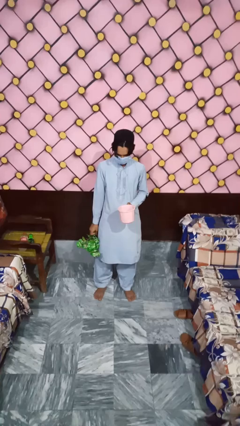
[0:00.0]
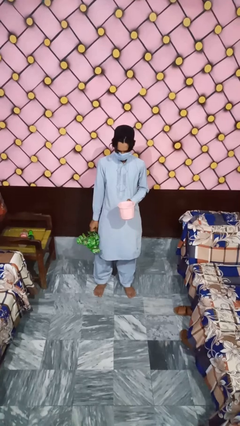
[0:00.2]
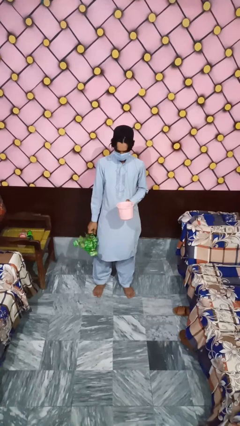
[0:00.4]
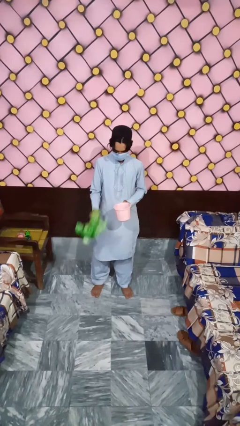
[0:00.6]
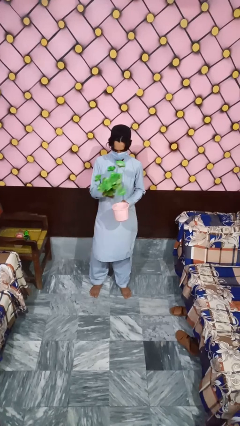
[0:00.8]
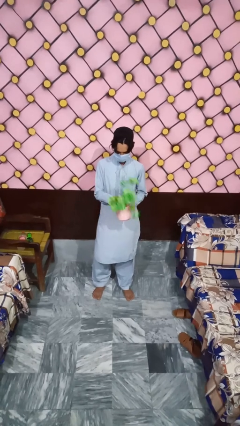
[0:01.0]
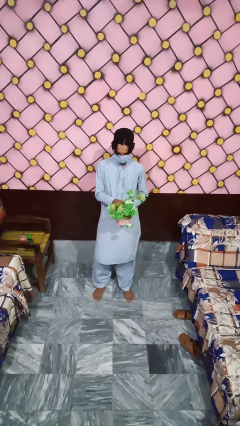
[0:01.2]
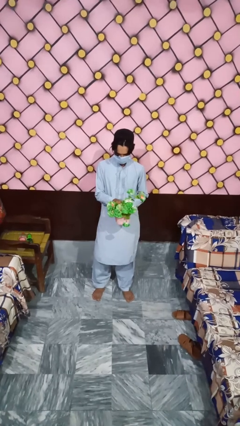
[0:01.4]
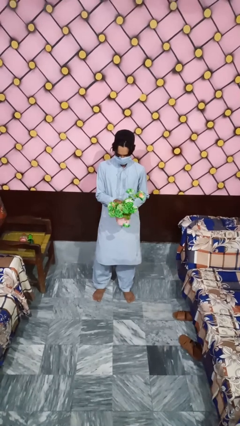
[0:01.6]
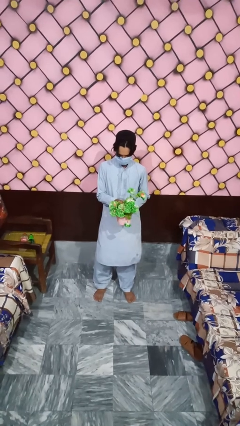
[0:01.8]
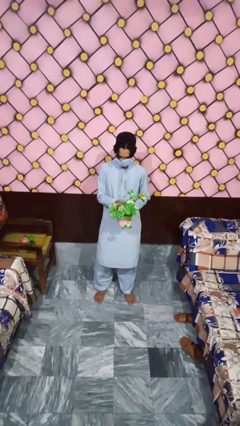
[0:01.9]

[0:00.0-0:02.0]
person arranges flowers in vase

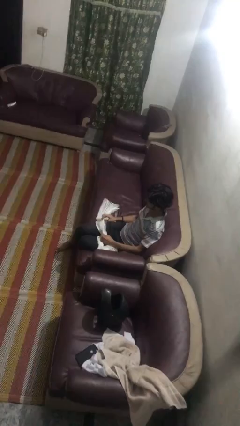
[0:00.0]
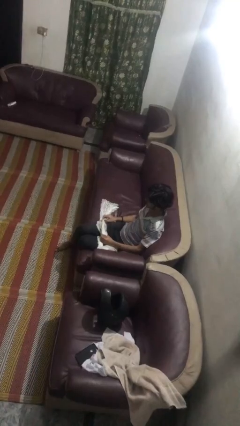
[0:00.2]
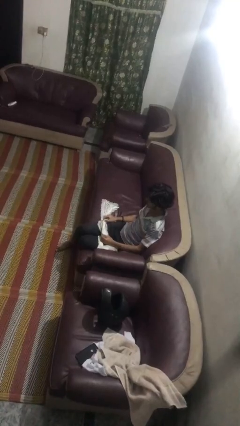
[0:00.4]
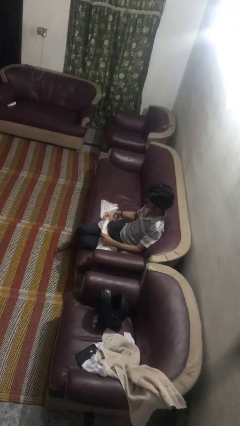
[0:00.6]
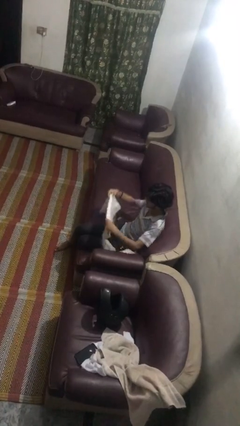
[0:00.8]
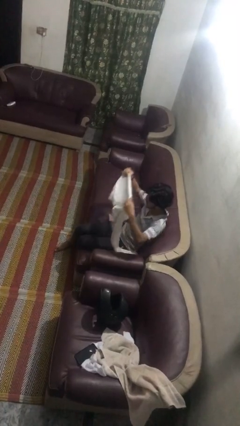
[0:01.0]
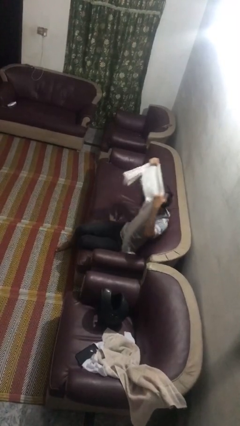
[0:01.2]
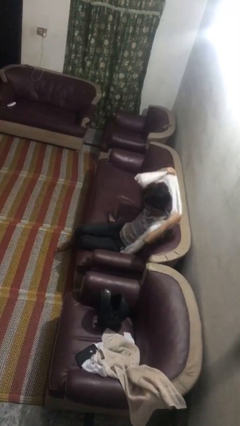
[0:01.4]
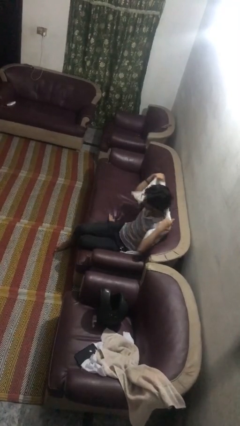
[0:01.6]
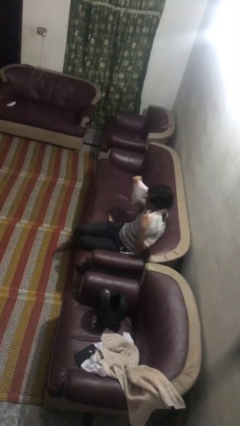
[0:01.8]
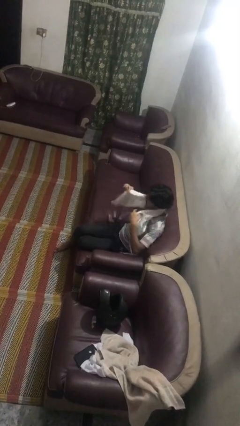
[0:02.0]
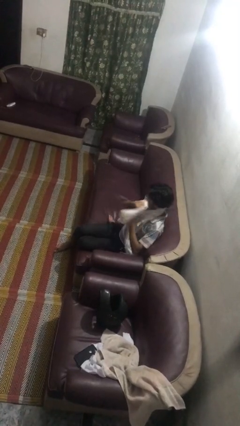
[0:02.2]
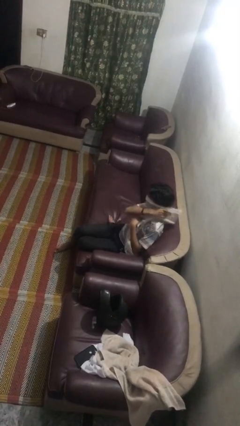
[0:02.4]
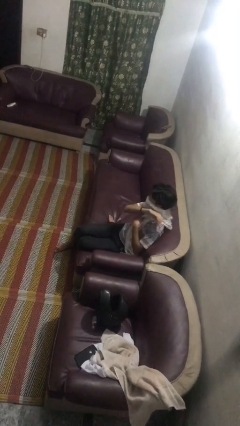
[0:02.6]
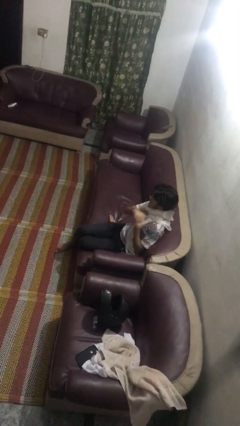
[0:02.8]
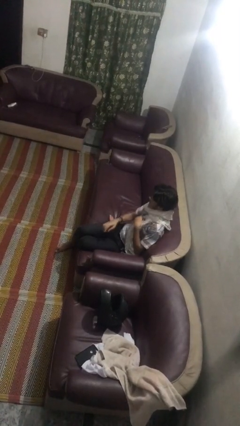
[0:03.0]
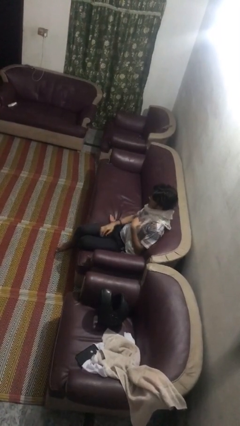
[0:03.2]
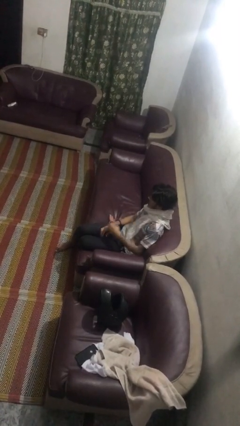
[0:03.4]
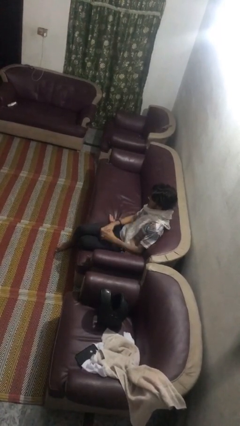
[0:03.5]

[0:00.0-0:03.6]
person puts on scarf

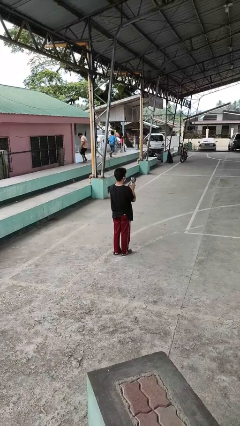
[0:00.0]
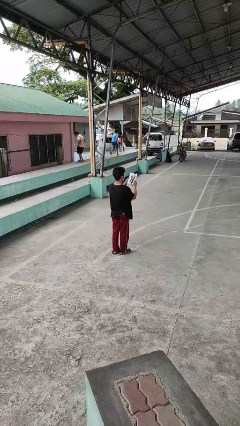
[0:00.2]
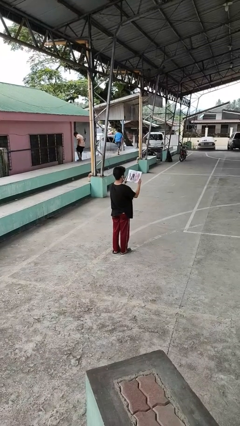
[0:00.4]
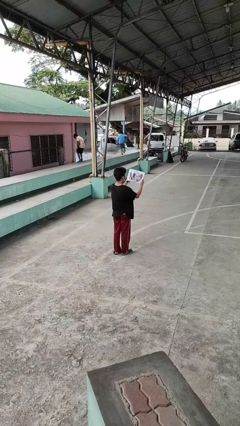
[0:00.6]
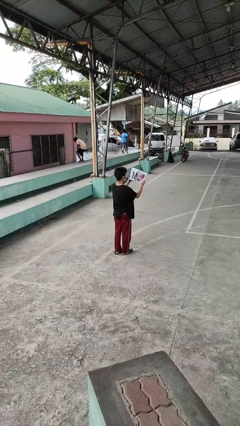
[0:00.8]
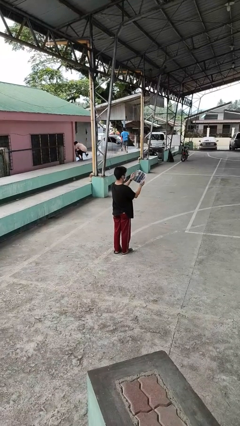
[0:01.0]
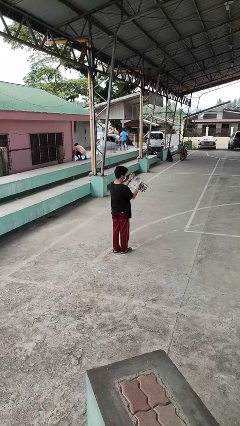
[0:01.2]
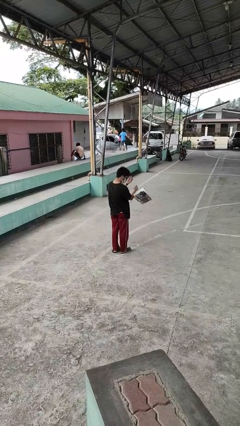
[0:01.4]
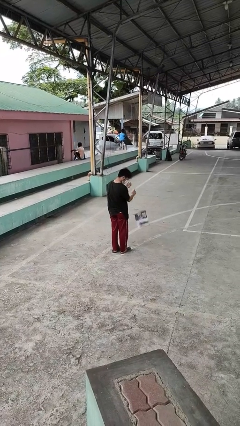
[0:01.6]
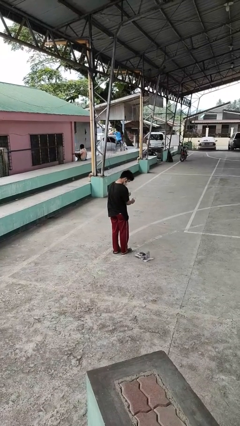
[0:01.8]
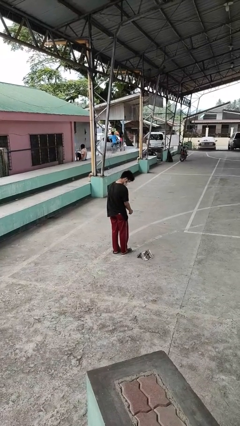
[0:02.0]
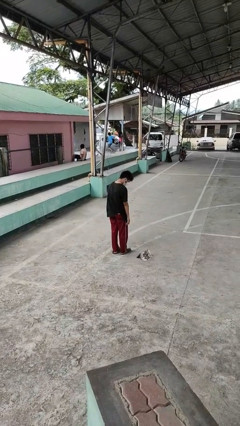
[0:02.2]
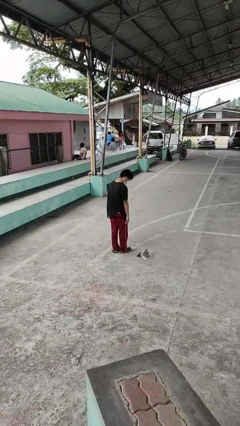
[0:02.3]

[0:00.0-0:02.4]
person drops object

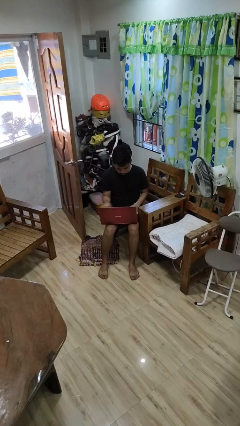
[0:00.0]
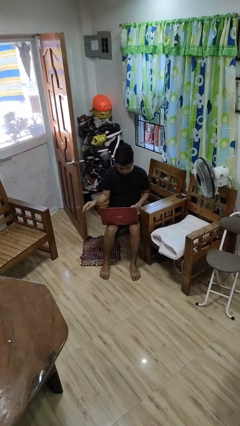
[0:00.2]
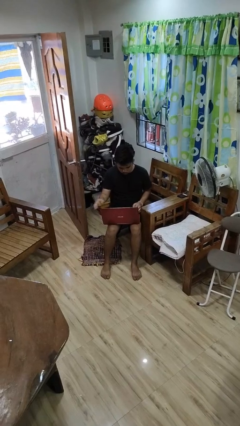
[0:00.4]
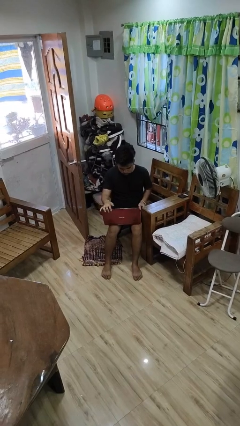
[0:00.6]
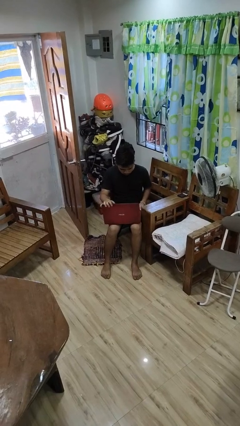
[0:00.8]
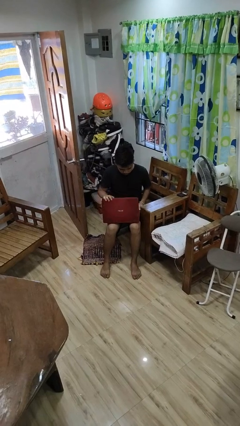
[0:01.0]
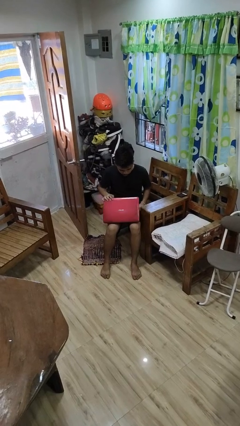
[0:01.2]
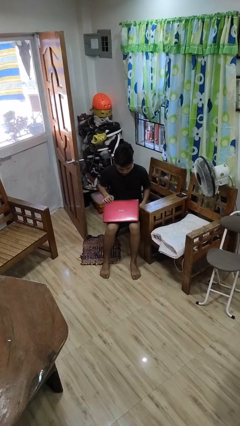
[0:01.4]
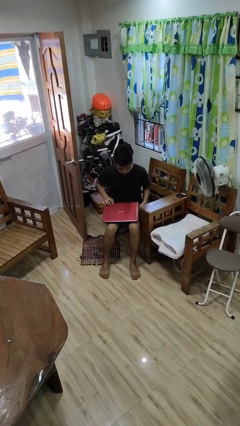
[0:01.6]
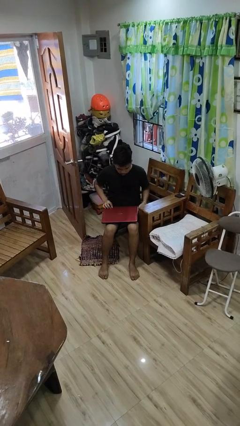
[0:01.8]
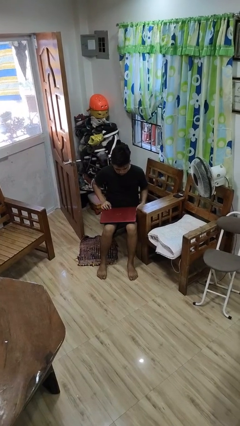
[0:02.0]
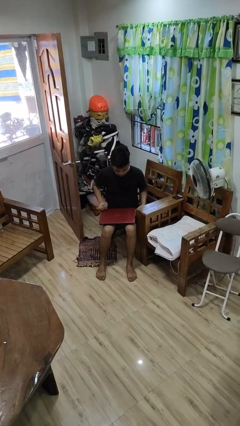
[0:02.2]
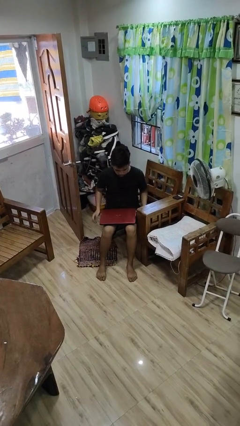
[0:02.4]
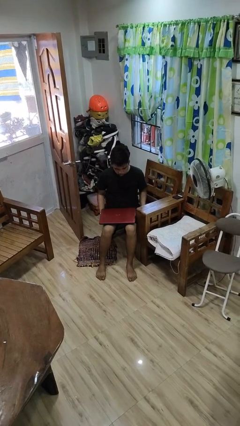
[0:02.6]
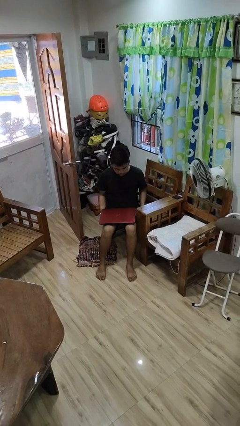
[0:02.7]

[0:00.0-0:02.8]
person closes laptop

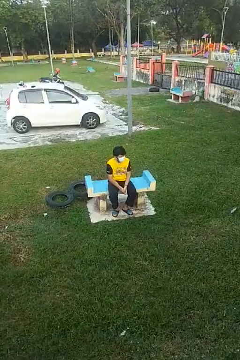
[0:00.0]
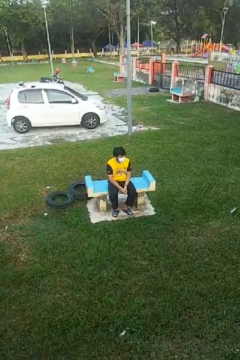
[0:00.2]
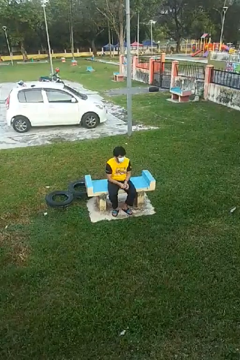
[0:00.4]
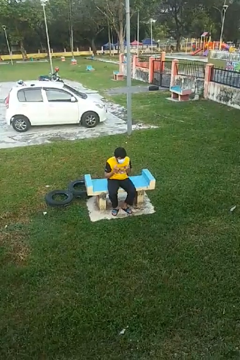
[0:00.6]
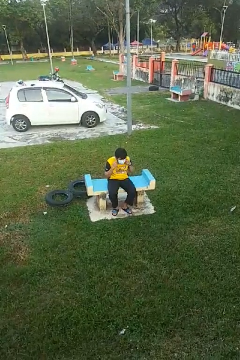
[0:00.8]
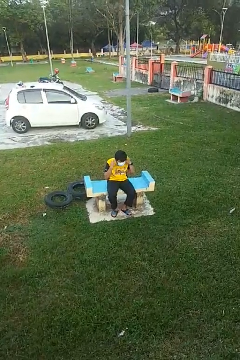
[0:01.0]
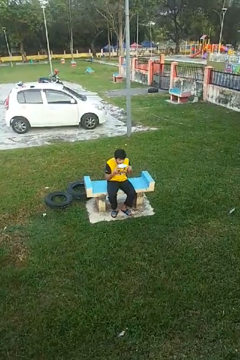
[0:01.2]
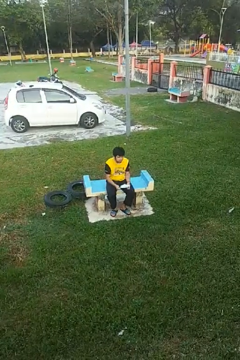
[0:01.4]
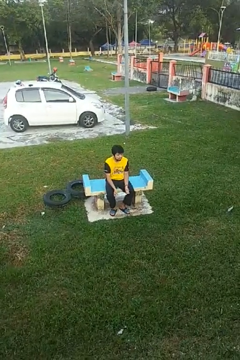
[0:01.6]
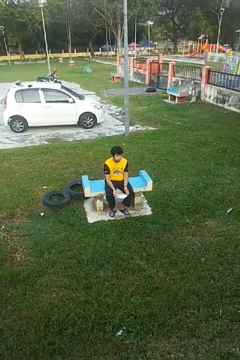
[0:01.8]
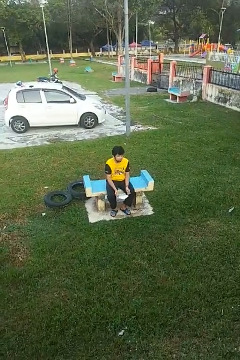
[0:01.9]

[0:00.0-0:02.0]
person takes off facemask

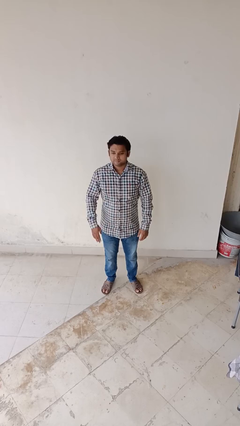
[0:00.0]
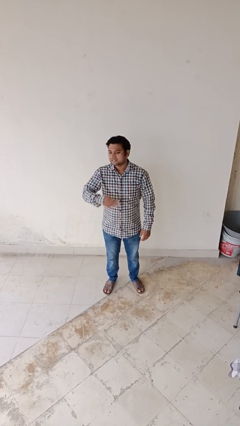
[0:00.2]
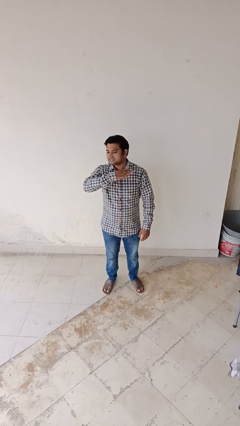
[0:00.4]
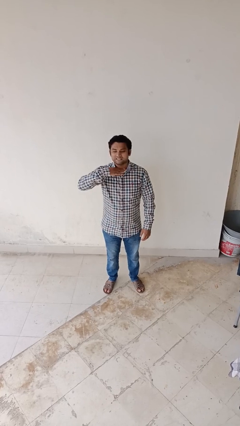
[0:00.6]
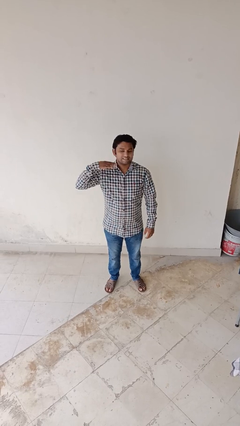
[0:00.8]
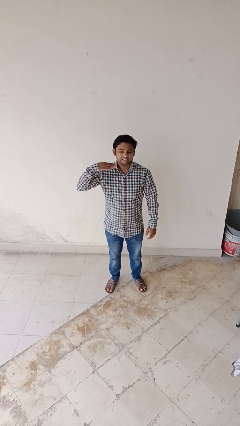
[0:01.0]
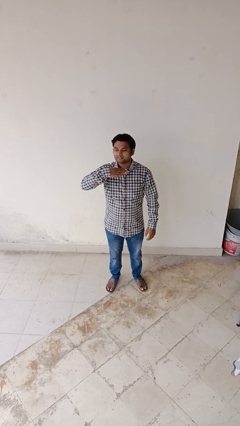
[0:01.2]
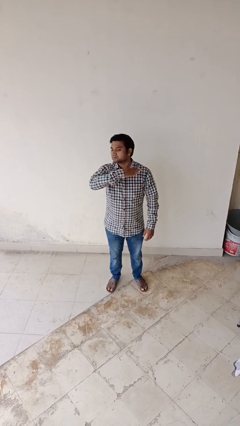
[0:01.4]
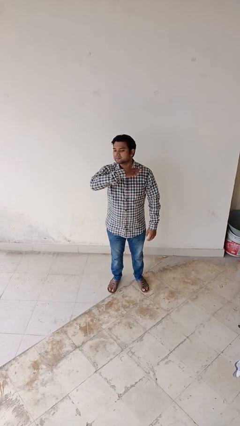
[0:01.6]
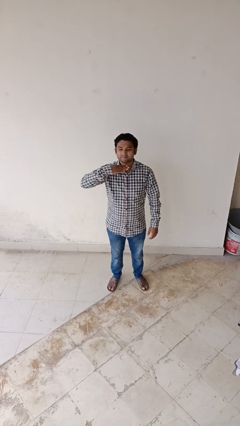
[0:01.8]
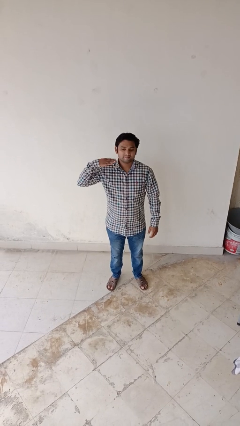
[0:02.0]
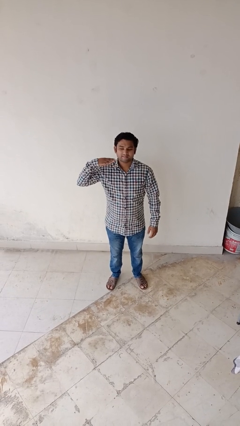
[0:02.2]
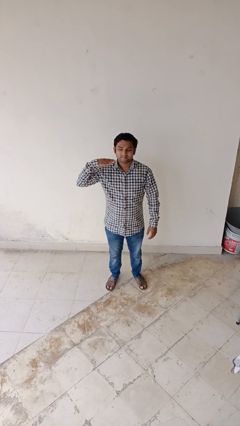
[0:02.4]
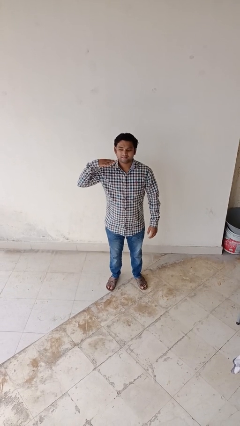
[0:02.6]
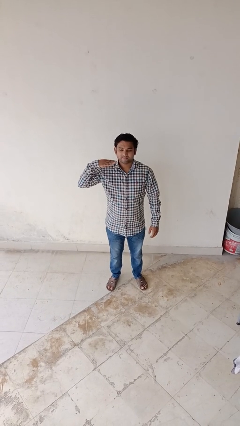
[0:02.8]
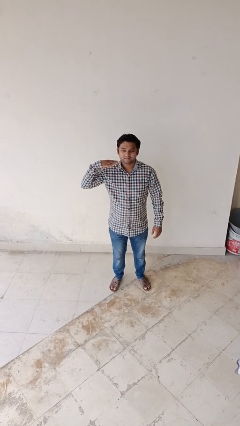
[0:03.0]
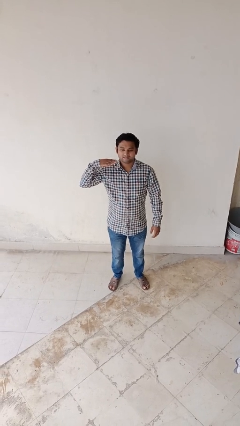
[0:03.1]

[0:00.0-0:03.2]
person gestures cut

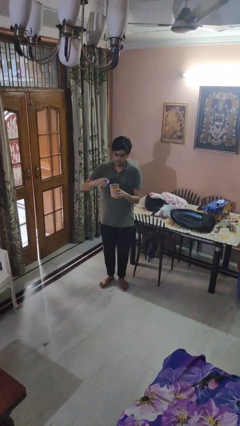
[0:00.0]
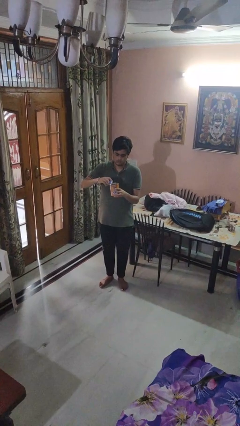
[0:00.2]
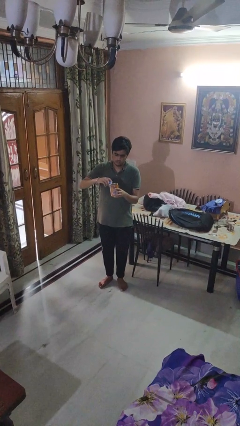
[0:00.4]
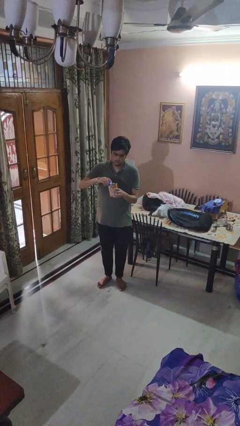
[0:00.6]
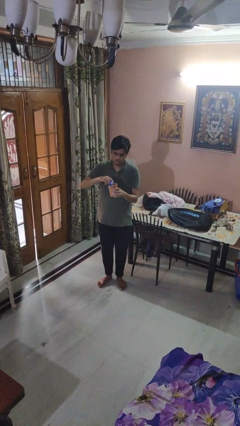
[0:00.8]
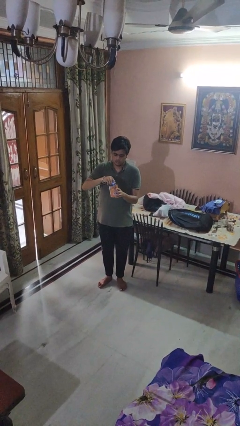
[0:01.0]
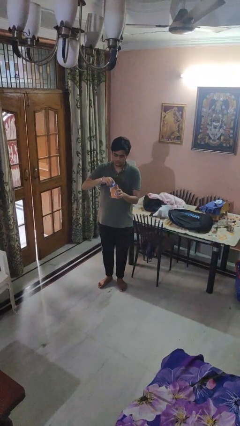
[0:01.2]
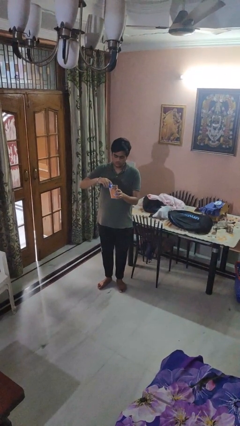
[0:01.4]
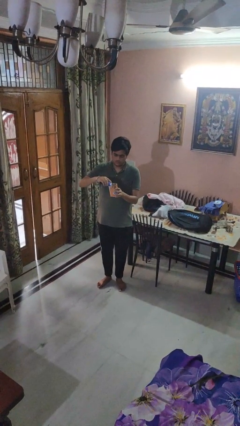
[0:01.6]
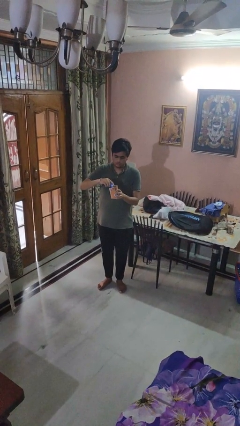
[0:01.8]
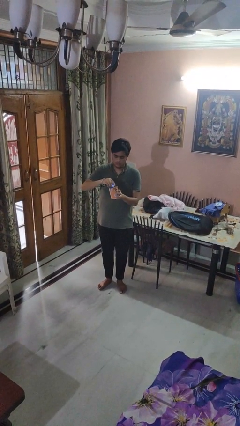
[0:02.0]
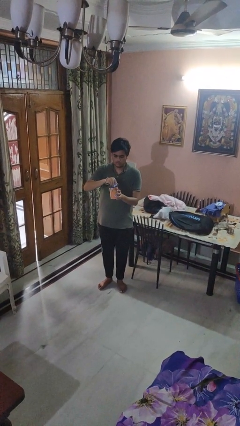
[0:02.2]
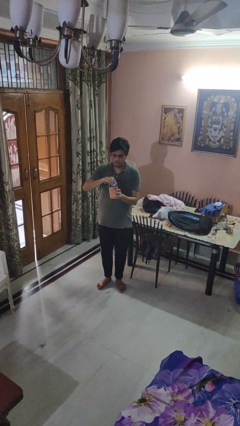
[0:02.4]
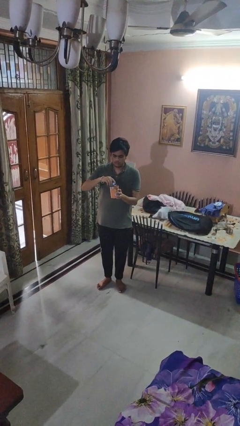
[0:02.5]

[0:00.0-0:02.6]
person opens can with can opener
